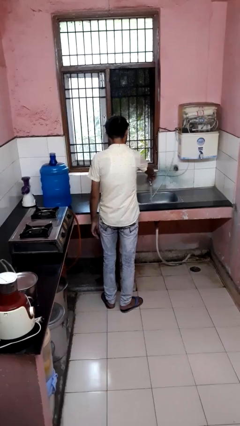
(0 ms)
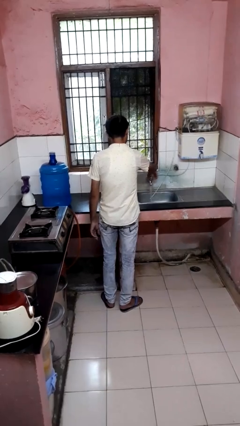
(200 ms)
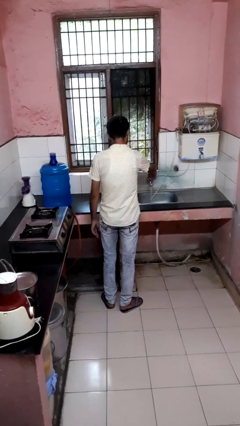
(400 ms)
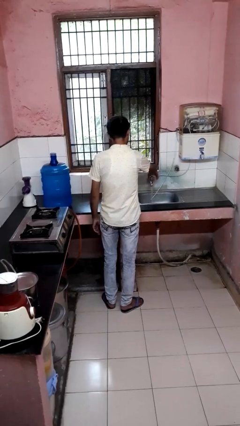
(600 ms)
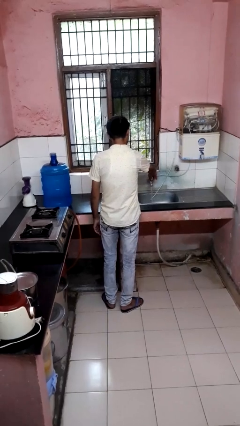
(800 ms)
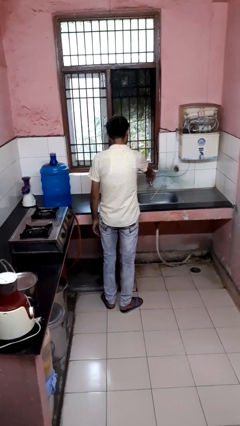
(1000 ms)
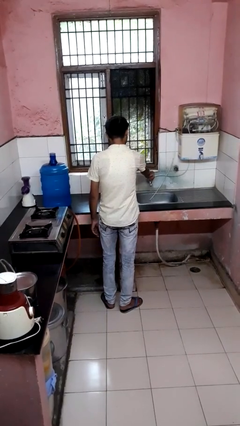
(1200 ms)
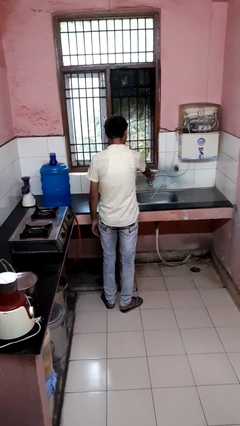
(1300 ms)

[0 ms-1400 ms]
person turns off faucet

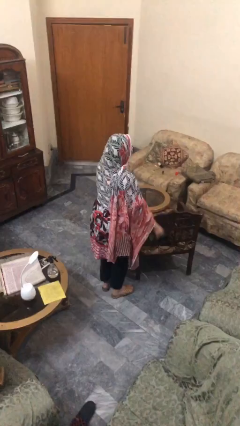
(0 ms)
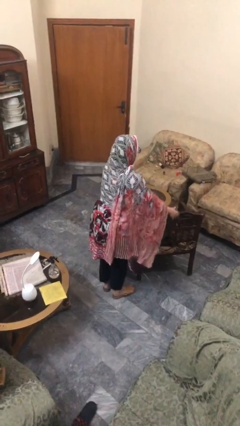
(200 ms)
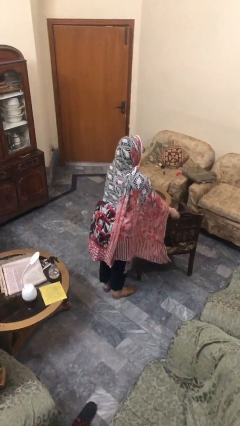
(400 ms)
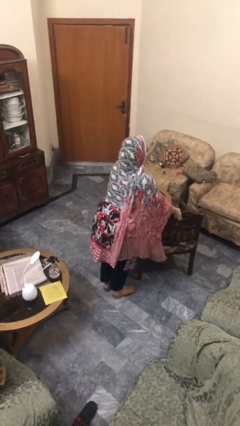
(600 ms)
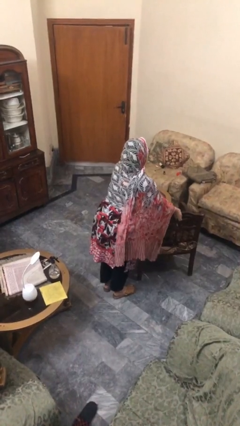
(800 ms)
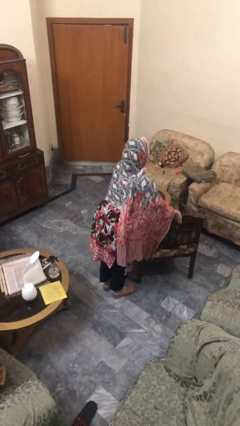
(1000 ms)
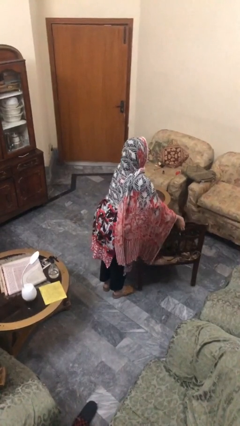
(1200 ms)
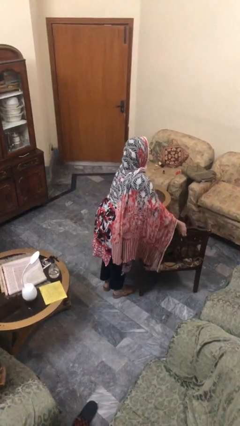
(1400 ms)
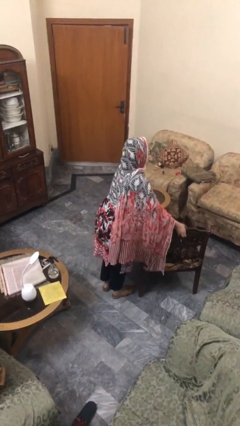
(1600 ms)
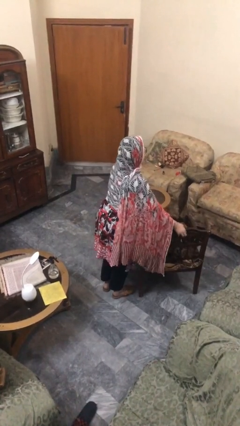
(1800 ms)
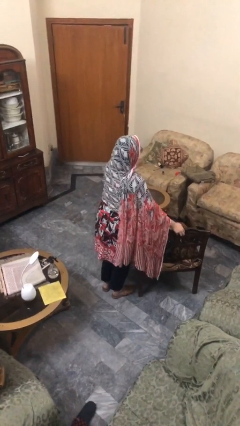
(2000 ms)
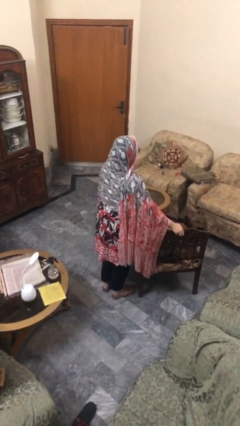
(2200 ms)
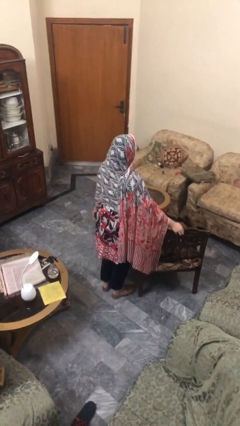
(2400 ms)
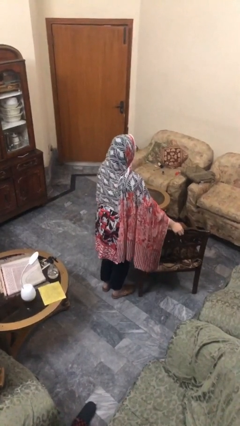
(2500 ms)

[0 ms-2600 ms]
person pulls out chair

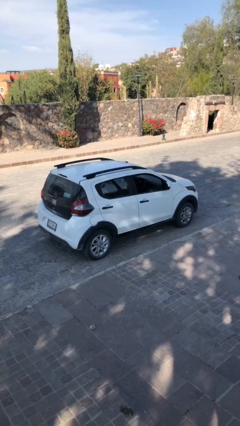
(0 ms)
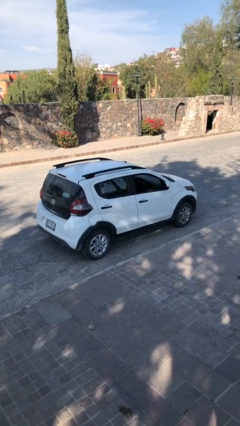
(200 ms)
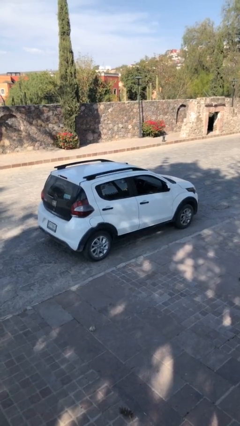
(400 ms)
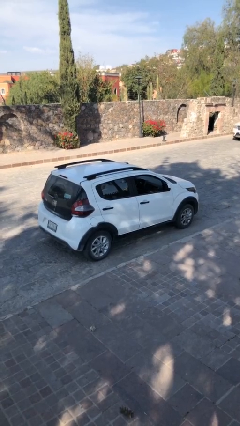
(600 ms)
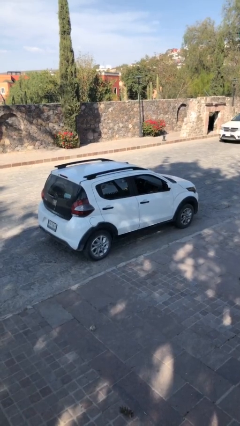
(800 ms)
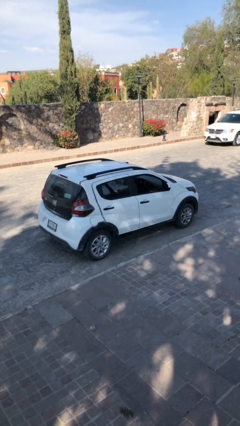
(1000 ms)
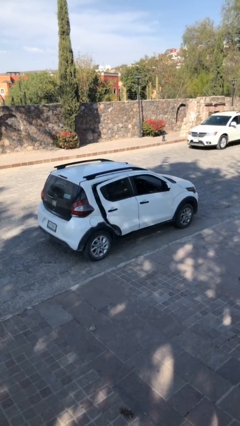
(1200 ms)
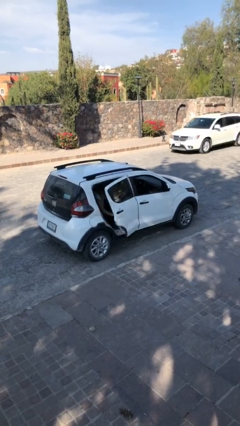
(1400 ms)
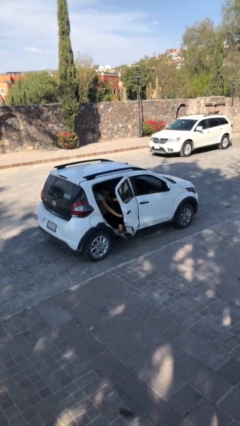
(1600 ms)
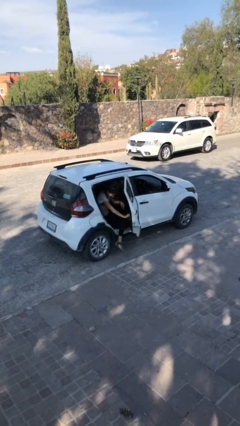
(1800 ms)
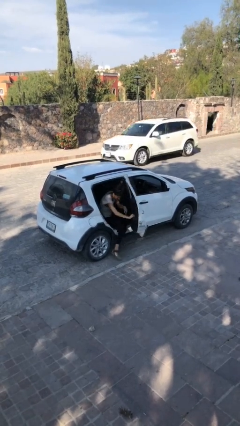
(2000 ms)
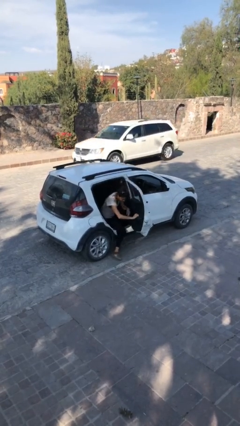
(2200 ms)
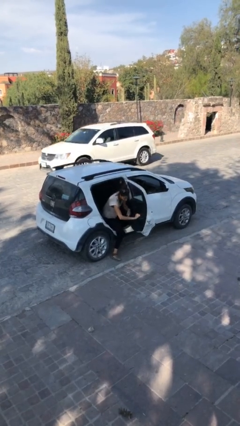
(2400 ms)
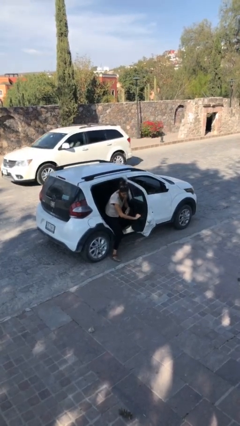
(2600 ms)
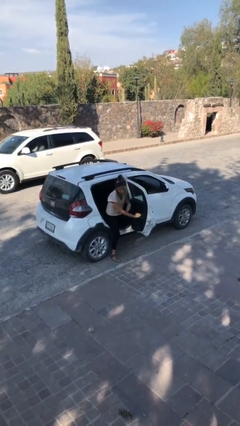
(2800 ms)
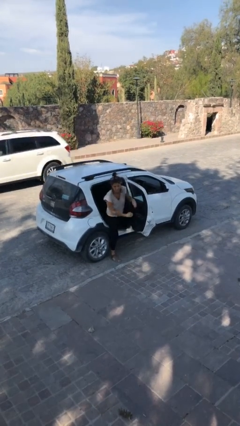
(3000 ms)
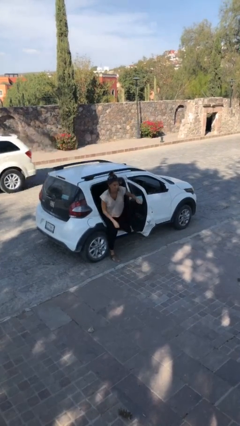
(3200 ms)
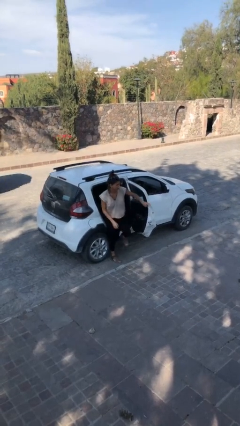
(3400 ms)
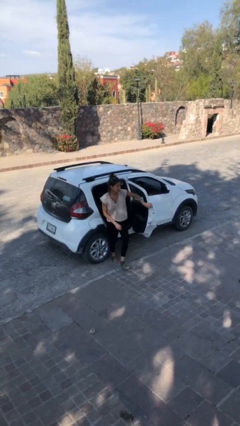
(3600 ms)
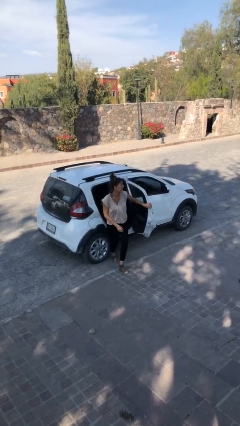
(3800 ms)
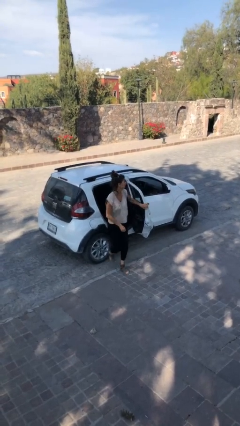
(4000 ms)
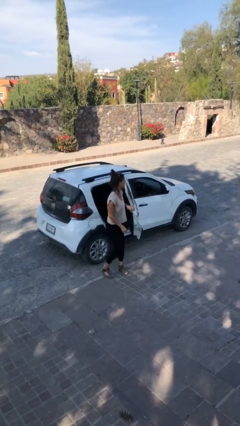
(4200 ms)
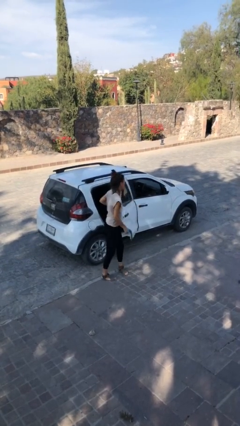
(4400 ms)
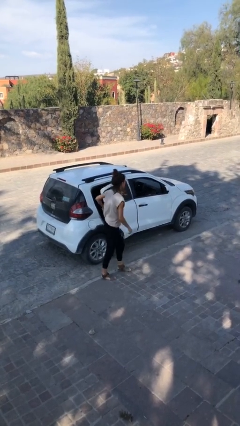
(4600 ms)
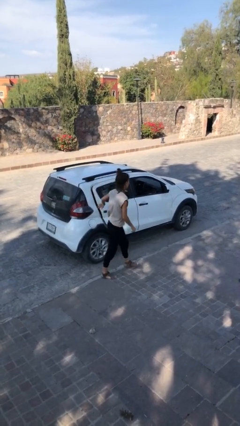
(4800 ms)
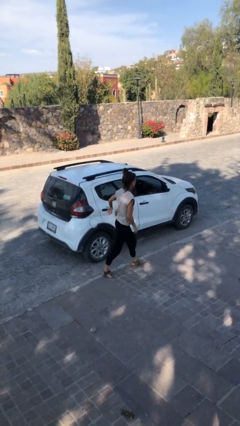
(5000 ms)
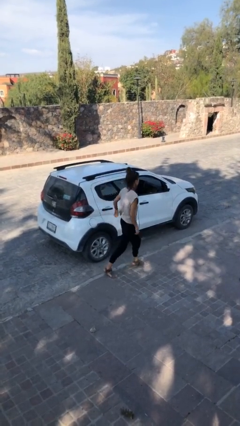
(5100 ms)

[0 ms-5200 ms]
car drops off person

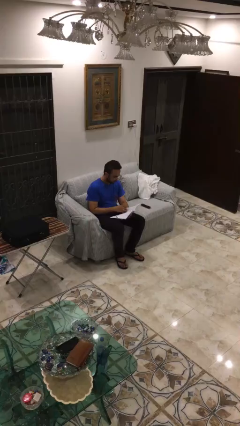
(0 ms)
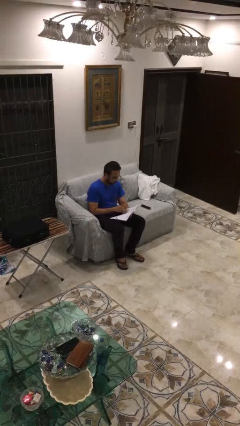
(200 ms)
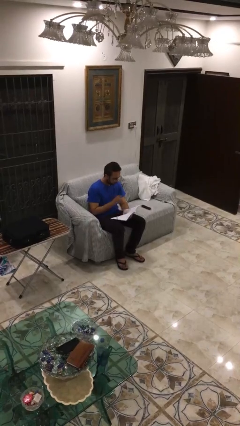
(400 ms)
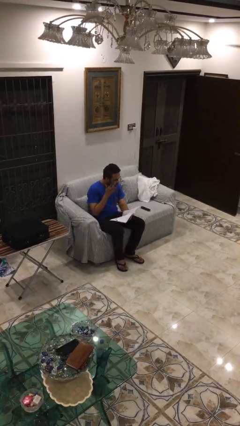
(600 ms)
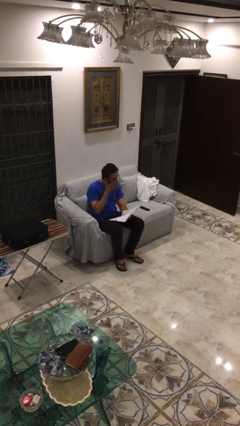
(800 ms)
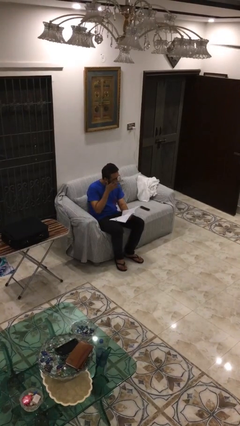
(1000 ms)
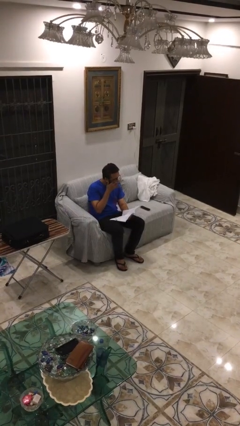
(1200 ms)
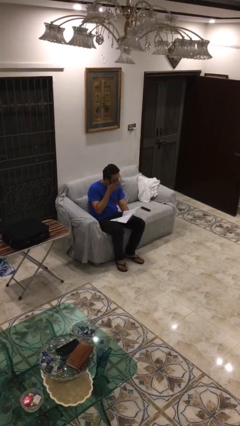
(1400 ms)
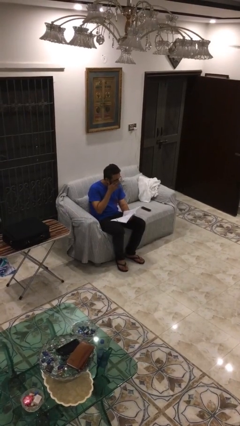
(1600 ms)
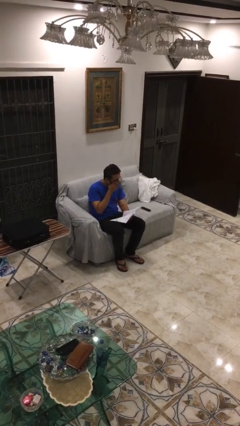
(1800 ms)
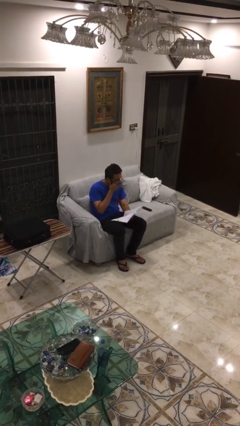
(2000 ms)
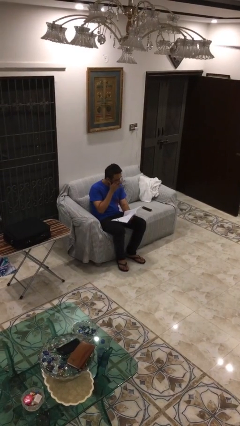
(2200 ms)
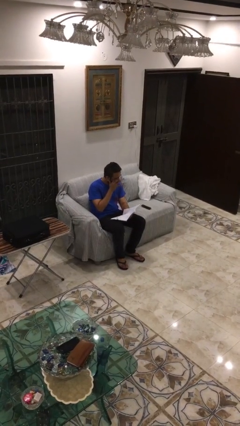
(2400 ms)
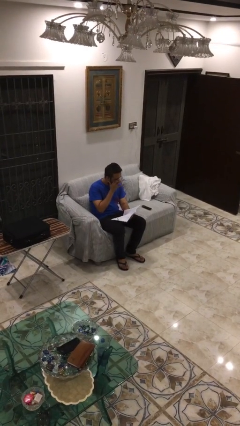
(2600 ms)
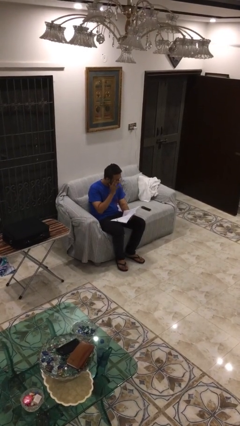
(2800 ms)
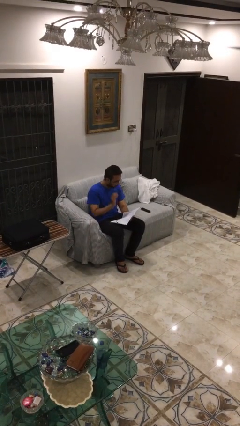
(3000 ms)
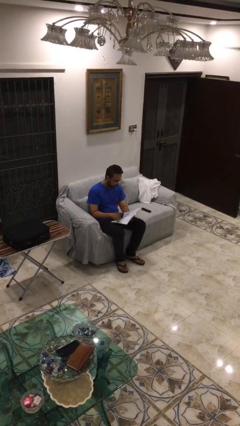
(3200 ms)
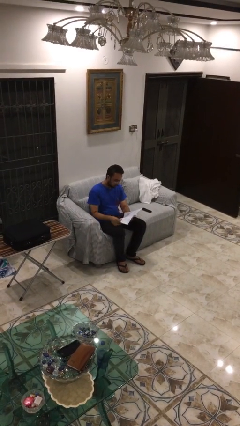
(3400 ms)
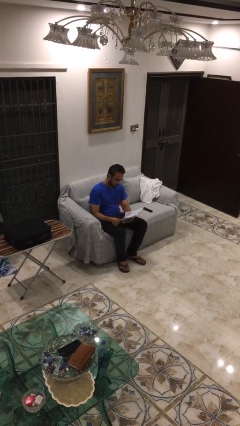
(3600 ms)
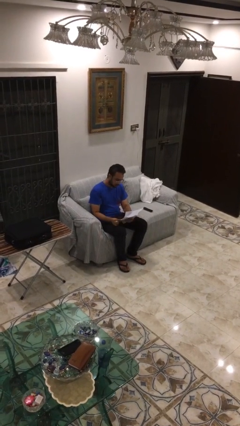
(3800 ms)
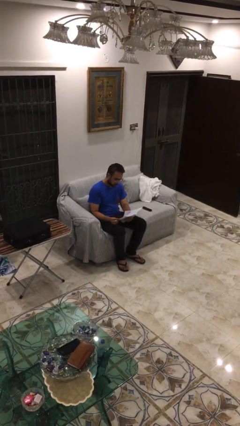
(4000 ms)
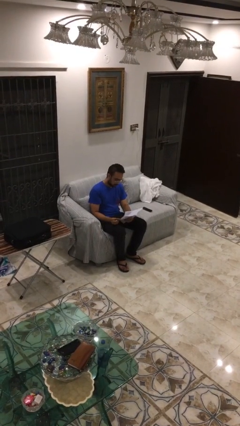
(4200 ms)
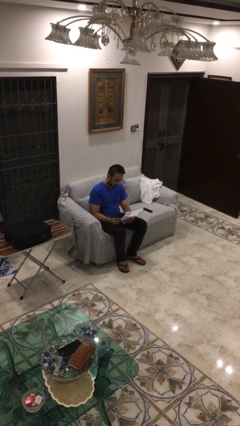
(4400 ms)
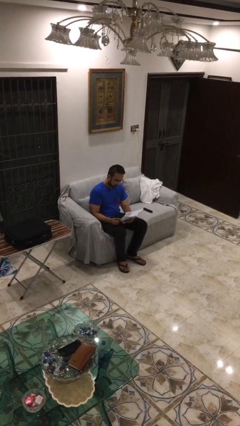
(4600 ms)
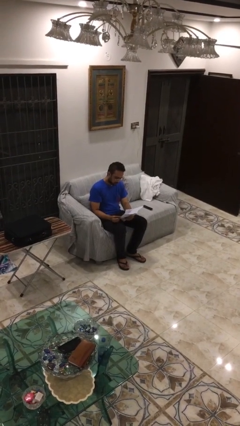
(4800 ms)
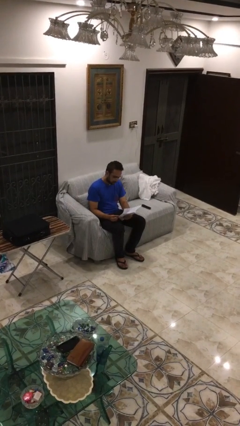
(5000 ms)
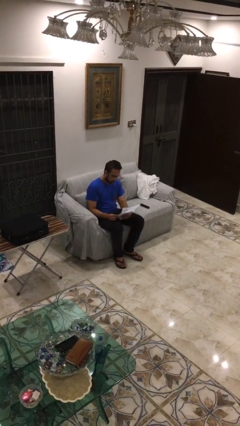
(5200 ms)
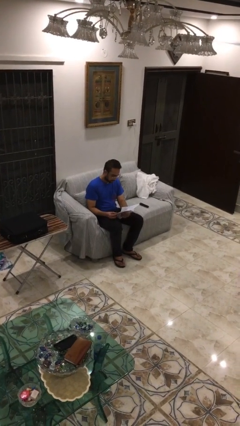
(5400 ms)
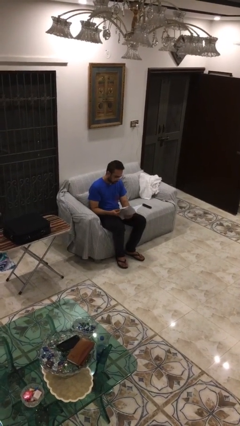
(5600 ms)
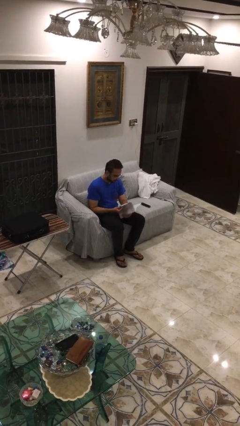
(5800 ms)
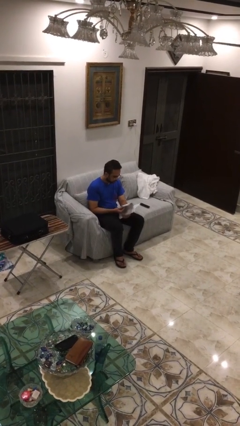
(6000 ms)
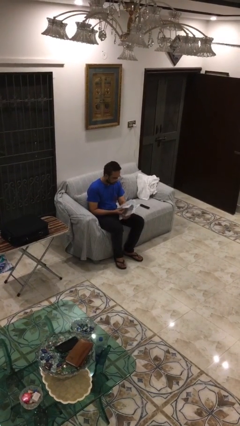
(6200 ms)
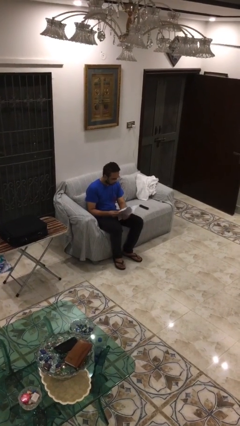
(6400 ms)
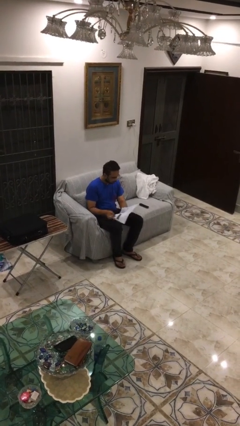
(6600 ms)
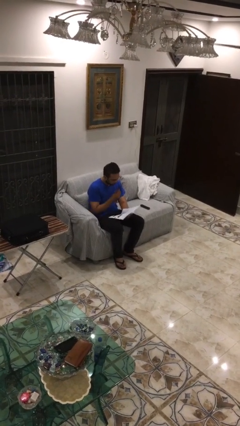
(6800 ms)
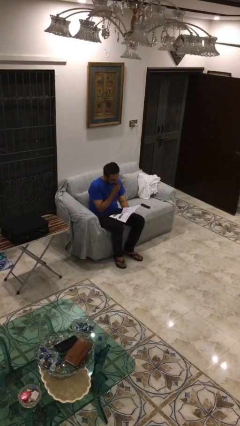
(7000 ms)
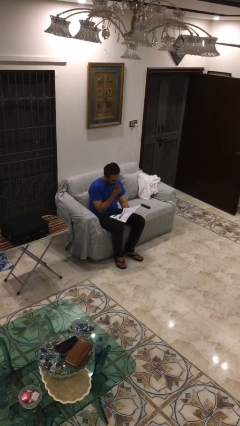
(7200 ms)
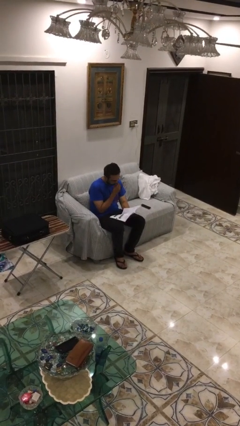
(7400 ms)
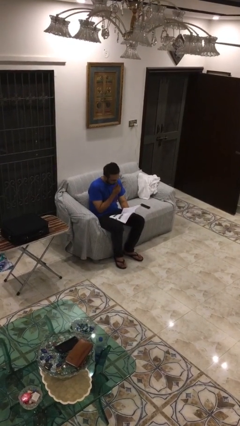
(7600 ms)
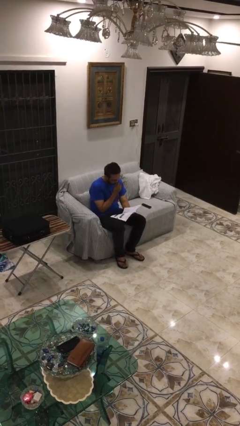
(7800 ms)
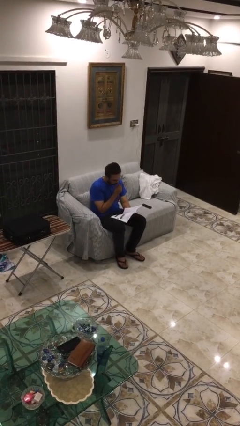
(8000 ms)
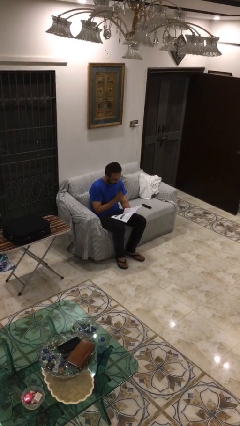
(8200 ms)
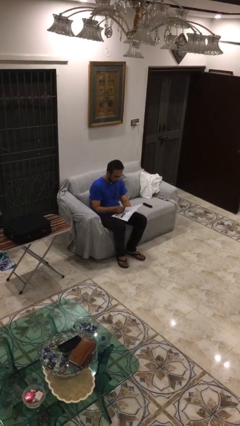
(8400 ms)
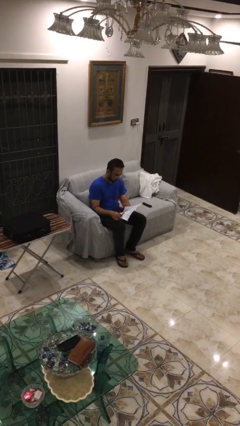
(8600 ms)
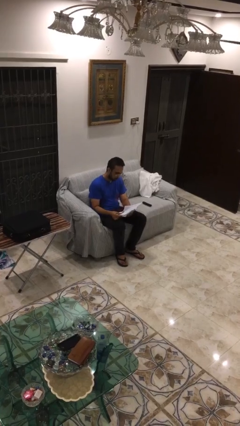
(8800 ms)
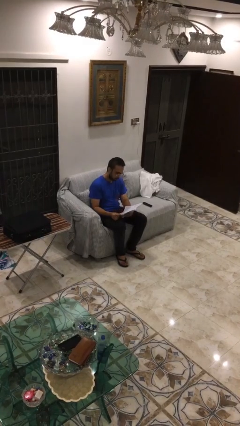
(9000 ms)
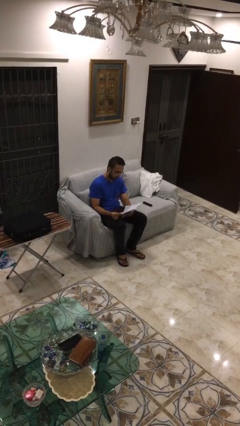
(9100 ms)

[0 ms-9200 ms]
person reads document
